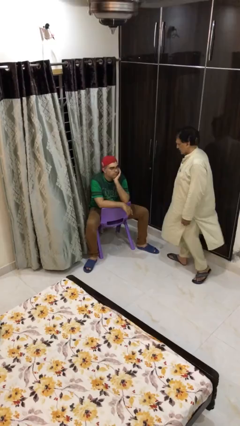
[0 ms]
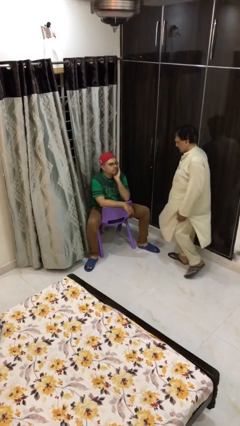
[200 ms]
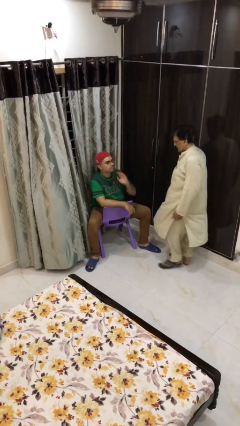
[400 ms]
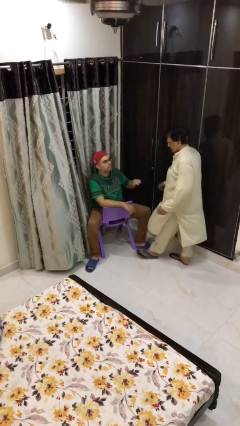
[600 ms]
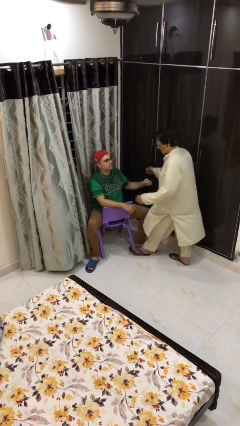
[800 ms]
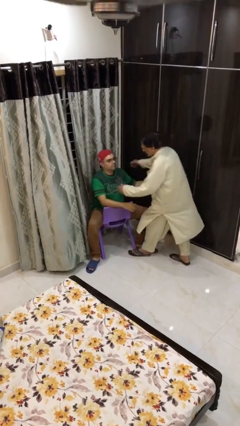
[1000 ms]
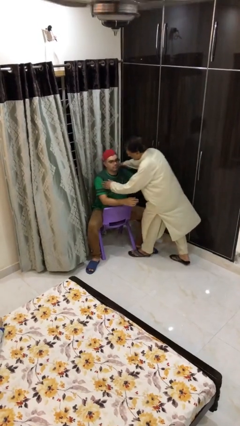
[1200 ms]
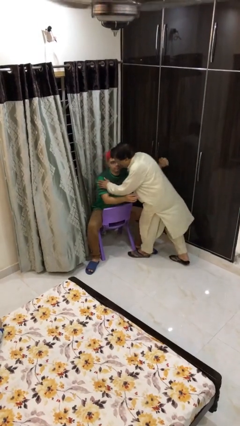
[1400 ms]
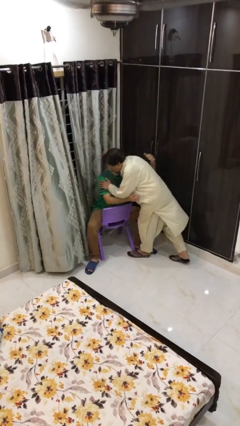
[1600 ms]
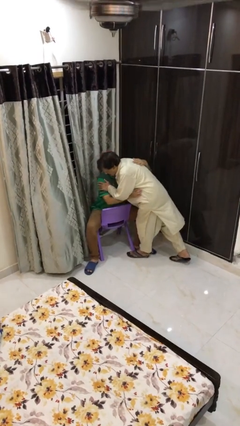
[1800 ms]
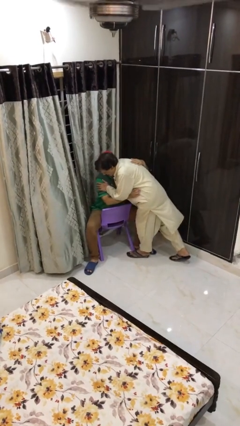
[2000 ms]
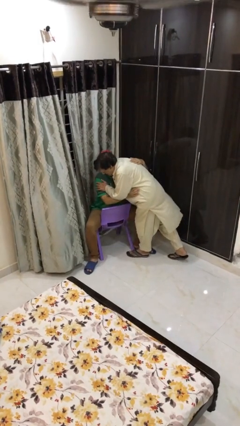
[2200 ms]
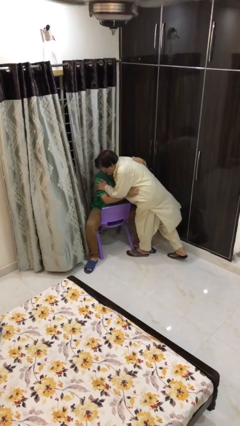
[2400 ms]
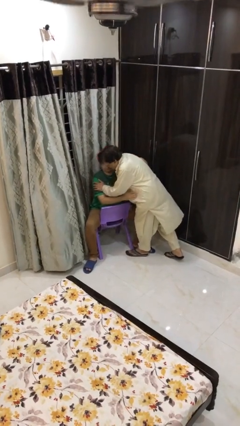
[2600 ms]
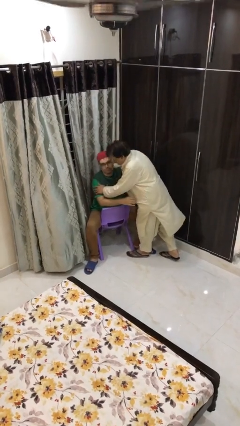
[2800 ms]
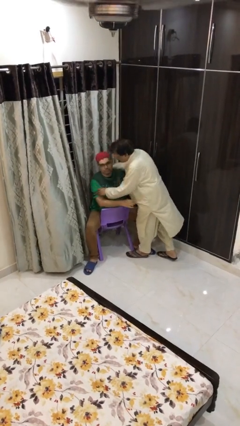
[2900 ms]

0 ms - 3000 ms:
person embraces person

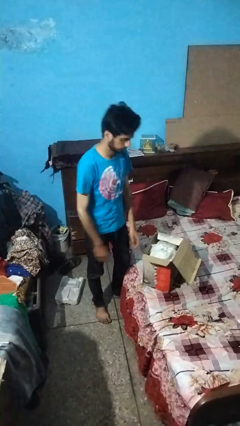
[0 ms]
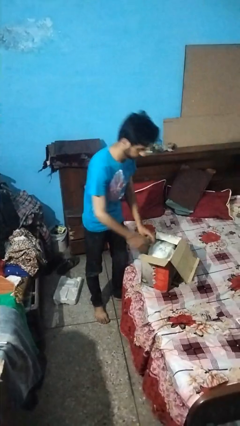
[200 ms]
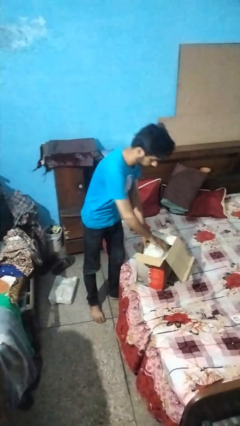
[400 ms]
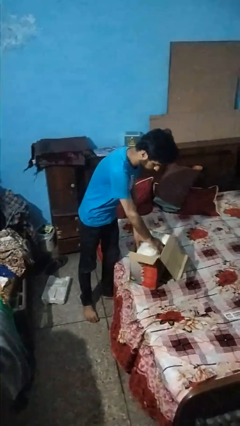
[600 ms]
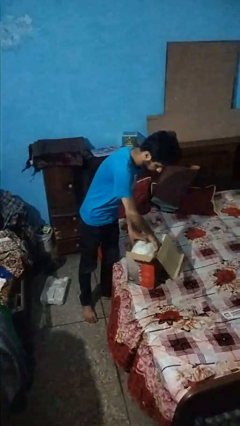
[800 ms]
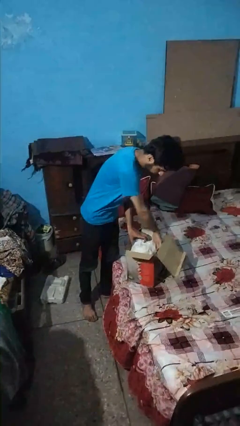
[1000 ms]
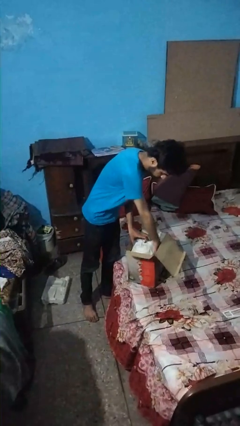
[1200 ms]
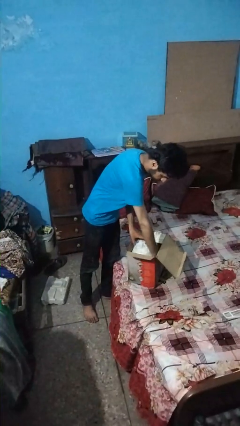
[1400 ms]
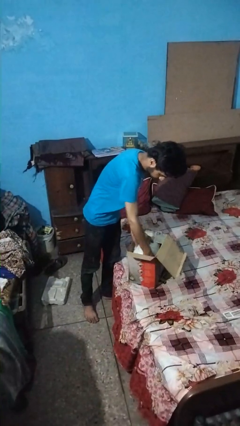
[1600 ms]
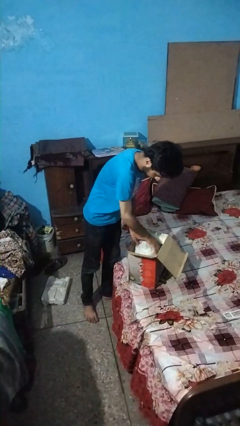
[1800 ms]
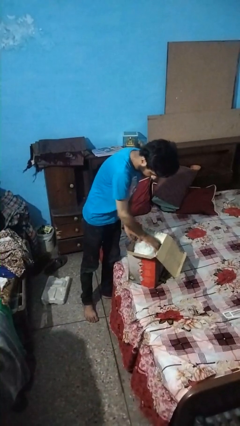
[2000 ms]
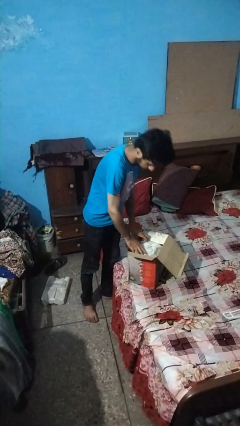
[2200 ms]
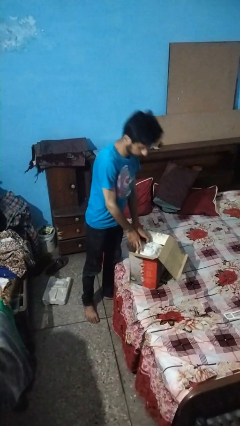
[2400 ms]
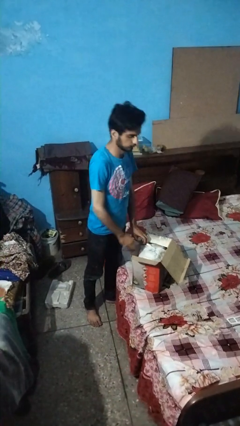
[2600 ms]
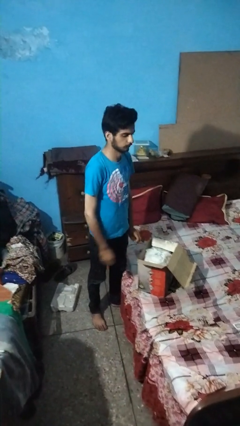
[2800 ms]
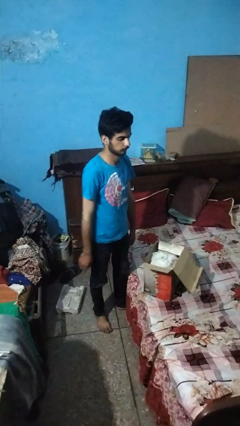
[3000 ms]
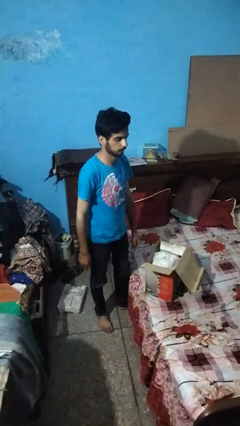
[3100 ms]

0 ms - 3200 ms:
person searches in box

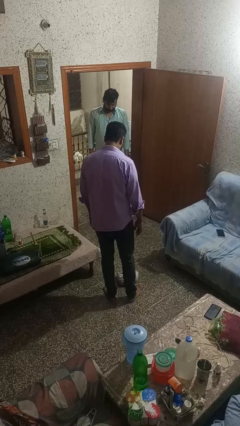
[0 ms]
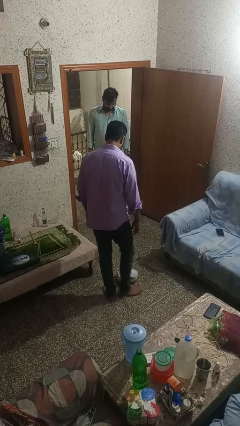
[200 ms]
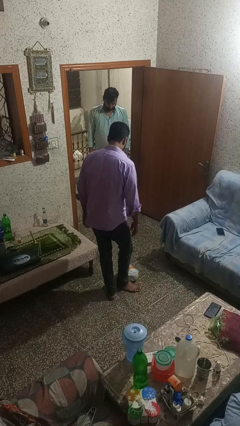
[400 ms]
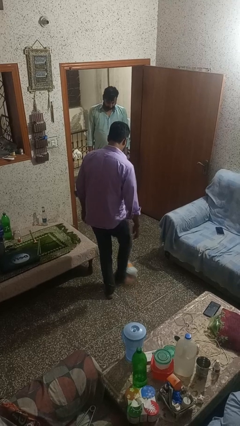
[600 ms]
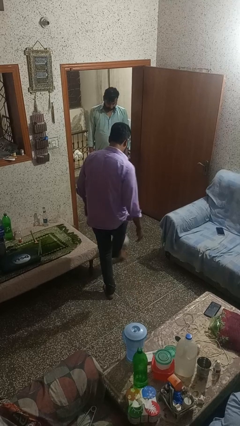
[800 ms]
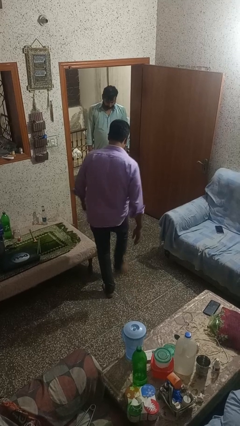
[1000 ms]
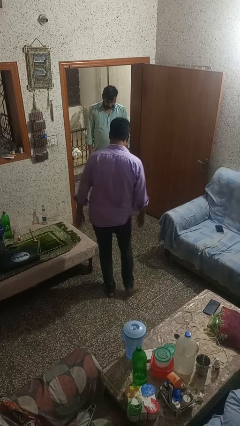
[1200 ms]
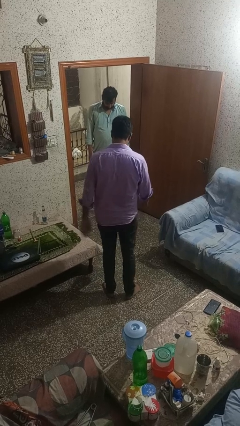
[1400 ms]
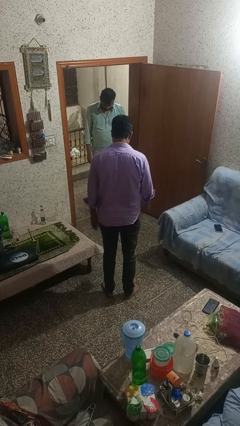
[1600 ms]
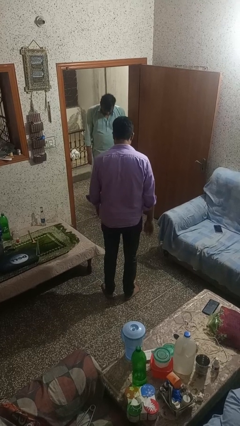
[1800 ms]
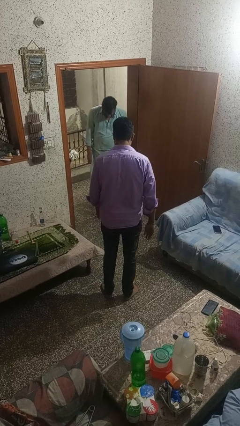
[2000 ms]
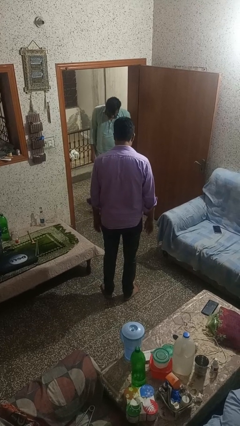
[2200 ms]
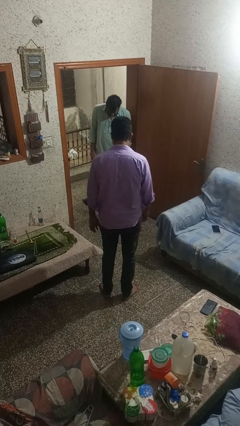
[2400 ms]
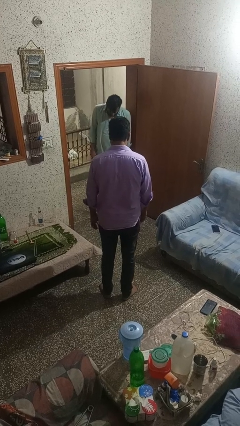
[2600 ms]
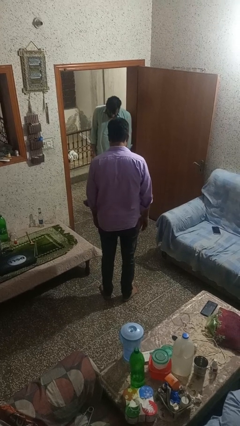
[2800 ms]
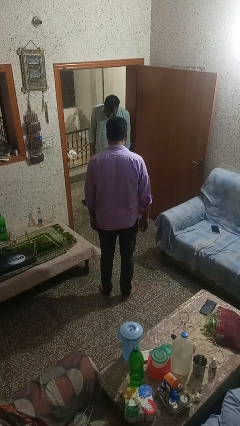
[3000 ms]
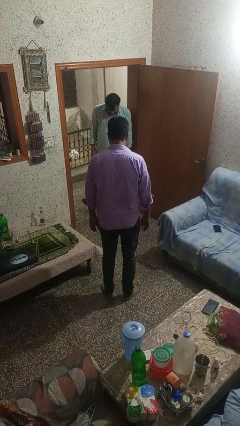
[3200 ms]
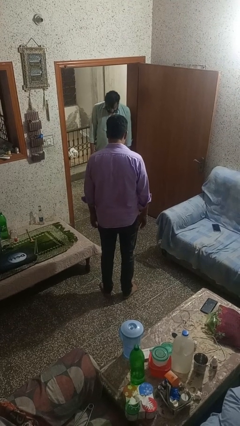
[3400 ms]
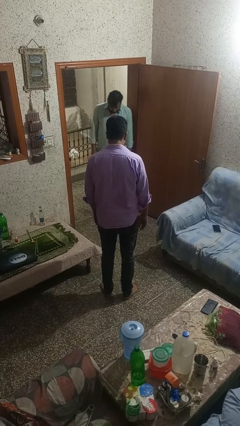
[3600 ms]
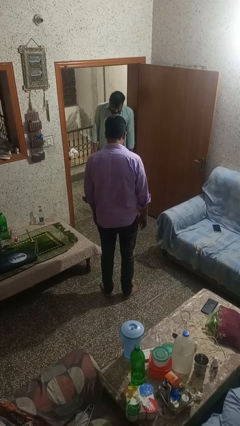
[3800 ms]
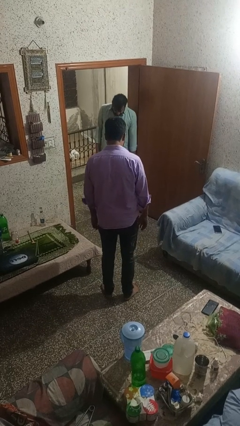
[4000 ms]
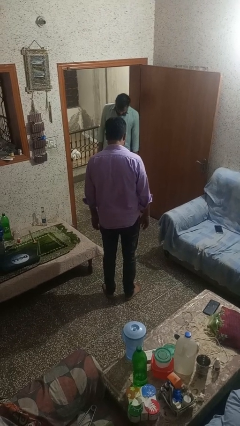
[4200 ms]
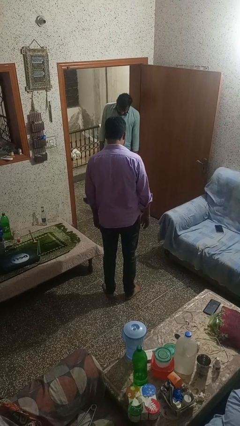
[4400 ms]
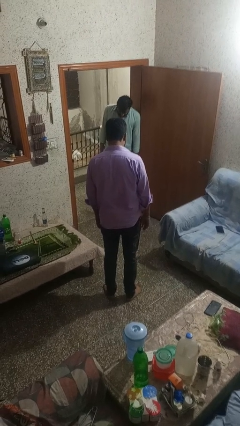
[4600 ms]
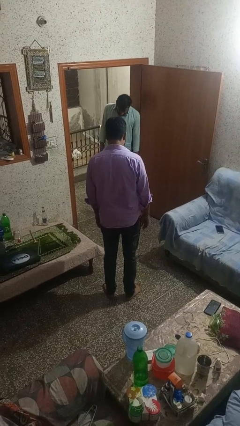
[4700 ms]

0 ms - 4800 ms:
person kicks object to person

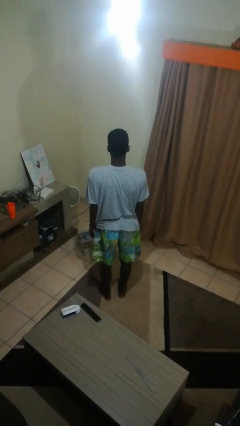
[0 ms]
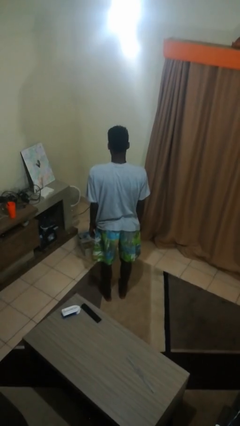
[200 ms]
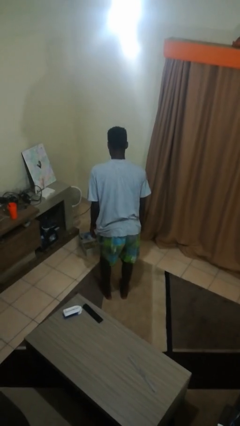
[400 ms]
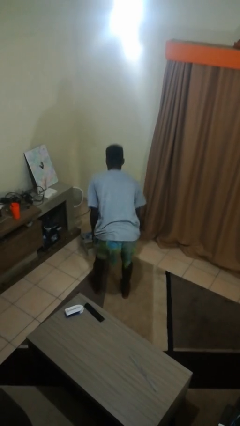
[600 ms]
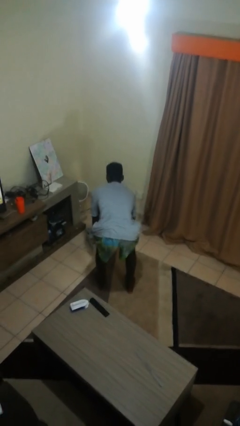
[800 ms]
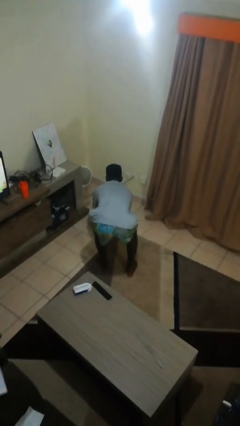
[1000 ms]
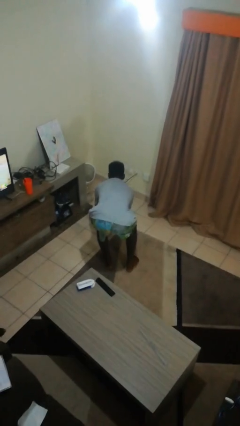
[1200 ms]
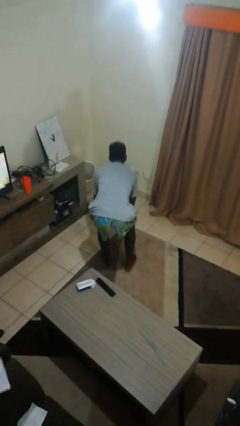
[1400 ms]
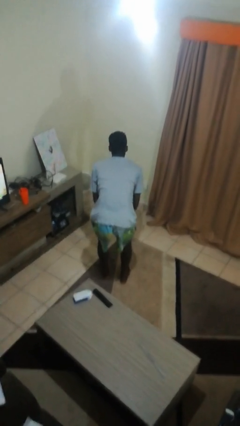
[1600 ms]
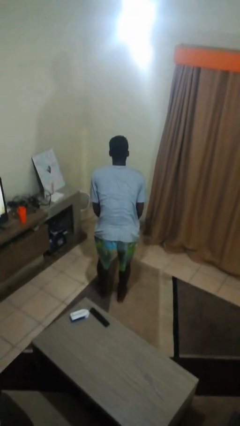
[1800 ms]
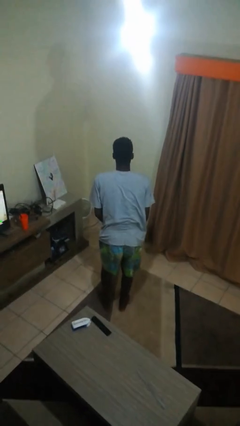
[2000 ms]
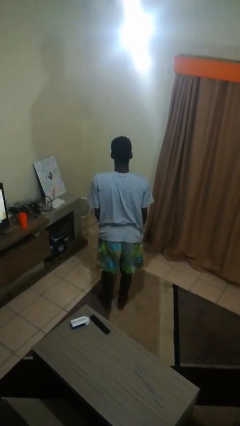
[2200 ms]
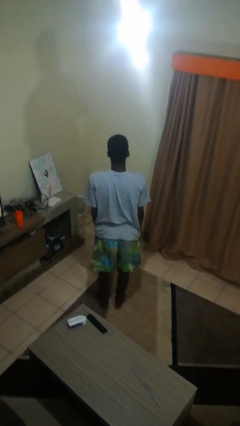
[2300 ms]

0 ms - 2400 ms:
person picks up object from floor

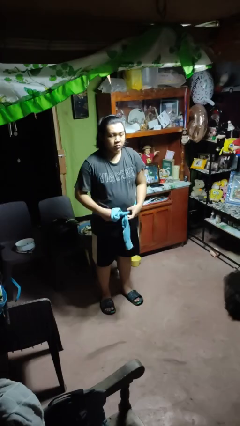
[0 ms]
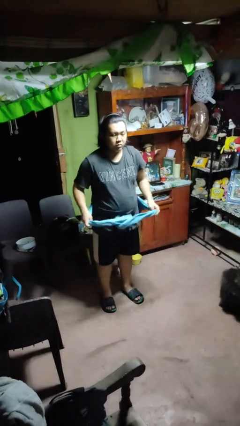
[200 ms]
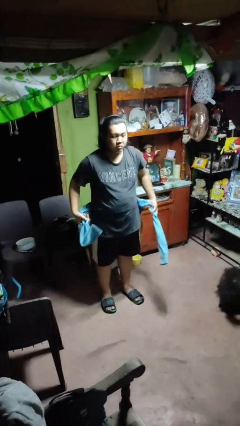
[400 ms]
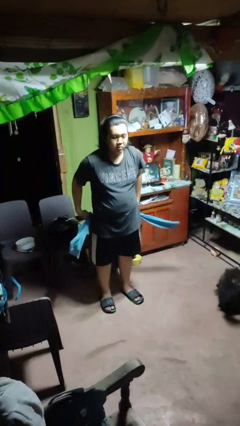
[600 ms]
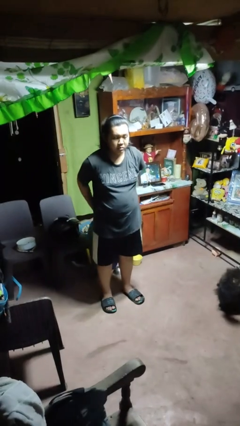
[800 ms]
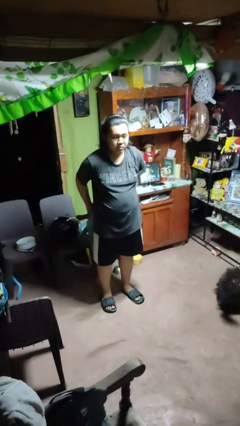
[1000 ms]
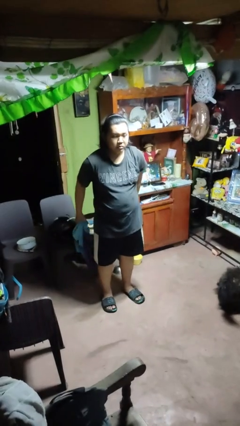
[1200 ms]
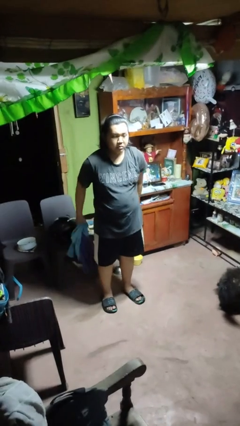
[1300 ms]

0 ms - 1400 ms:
person unties jacket around waist

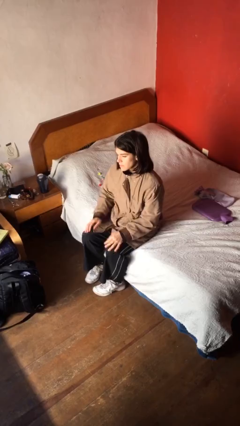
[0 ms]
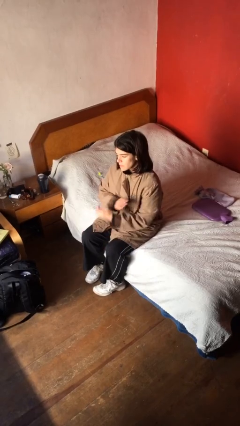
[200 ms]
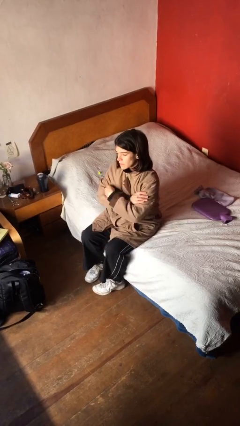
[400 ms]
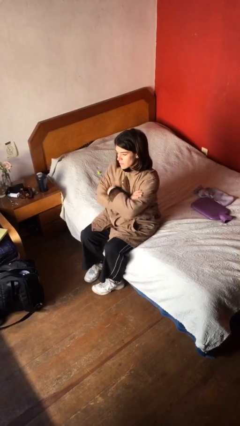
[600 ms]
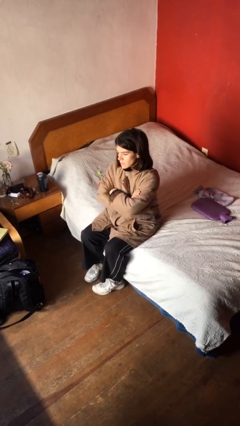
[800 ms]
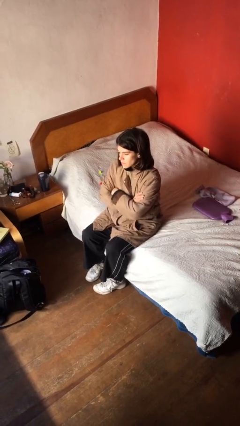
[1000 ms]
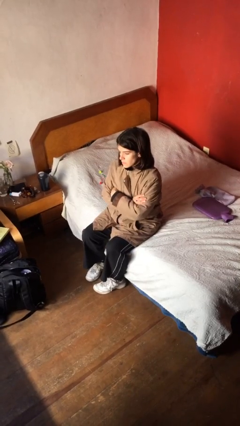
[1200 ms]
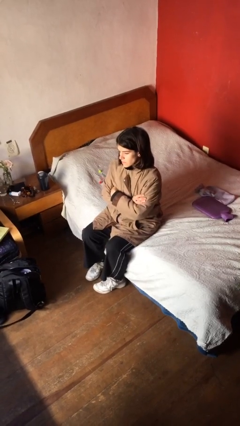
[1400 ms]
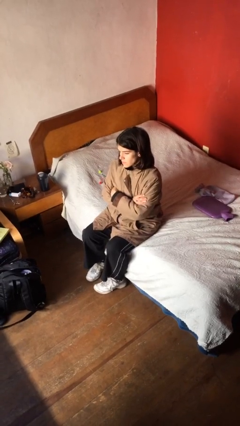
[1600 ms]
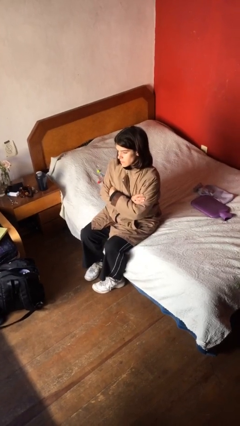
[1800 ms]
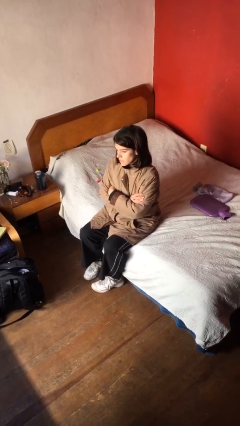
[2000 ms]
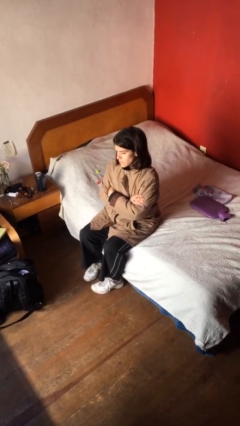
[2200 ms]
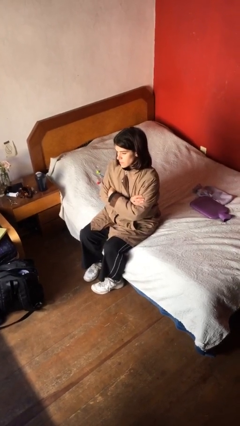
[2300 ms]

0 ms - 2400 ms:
person crosses arms
